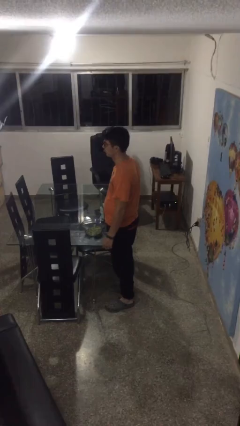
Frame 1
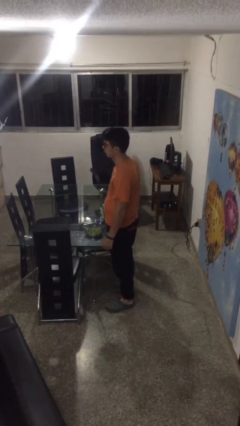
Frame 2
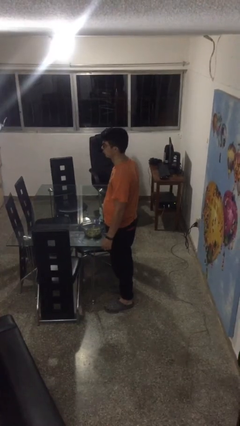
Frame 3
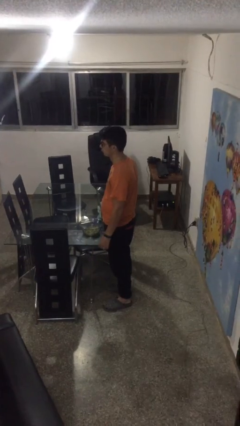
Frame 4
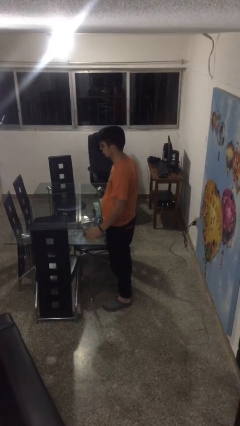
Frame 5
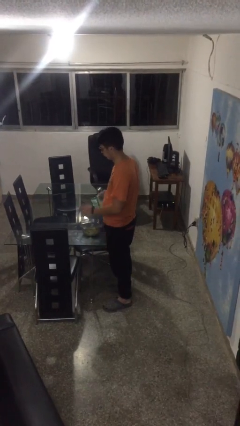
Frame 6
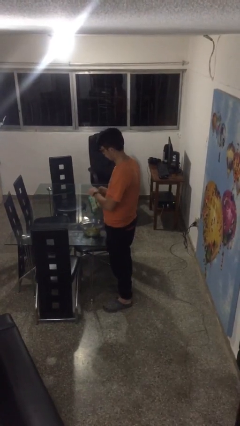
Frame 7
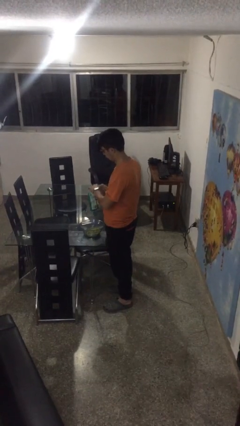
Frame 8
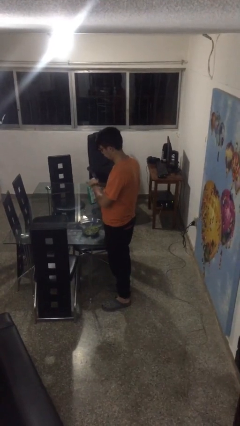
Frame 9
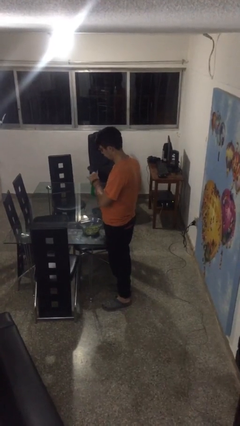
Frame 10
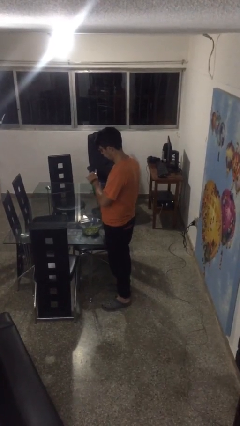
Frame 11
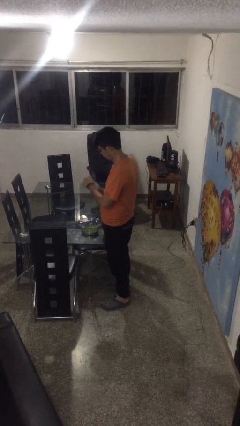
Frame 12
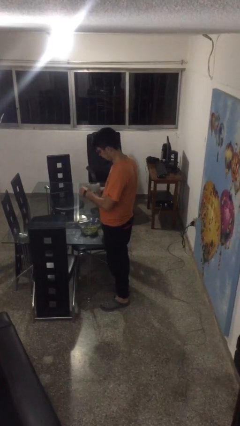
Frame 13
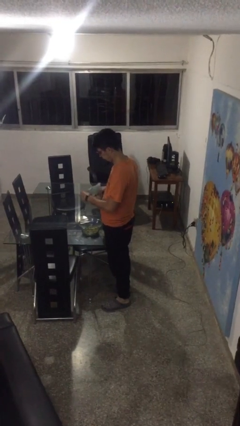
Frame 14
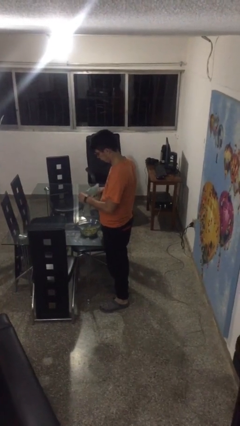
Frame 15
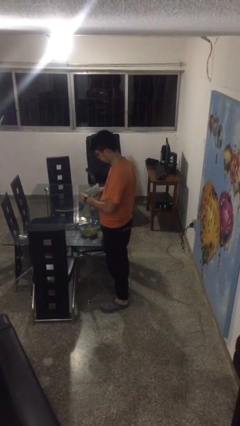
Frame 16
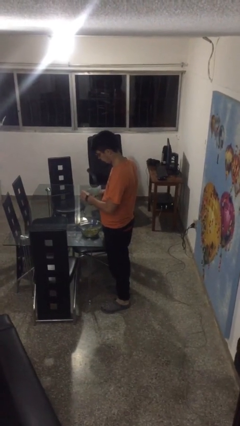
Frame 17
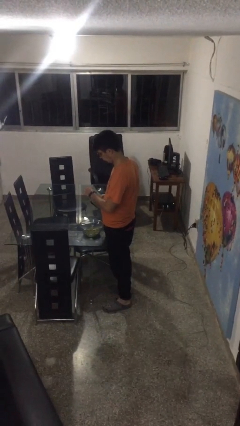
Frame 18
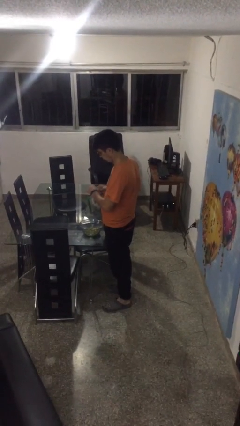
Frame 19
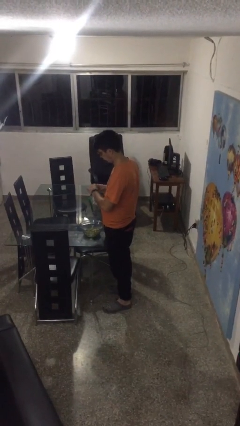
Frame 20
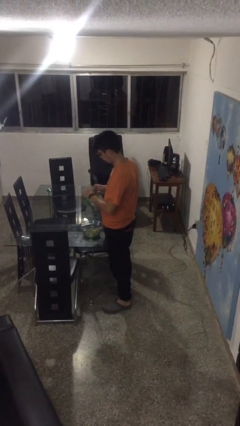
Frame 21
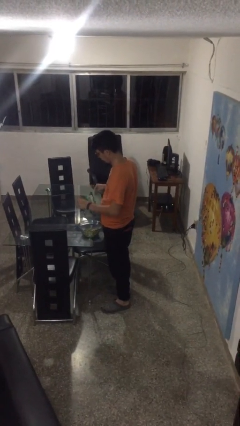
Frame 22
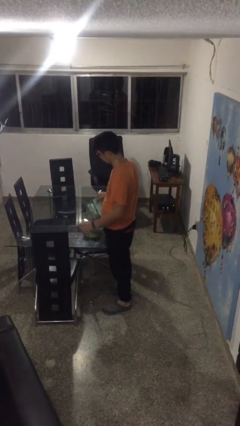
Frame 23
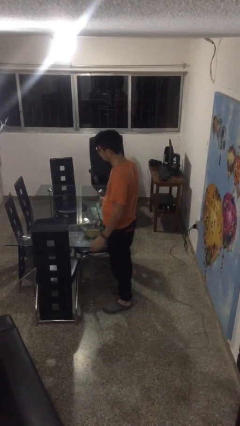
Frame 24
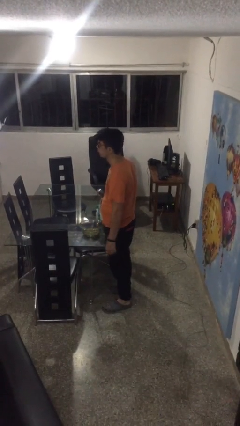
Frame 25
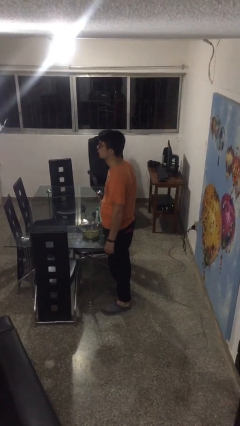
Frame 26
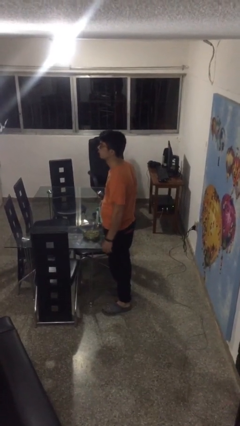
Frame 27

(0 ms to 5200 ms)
person pours into bowl

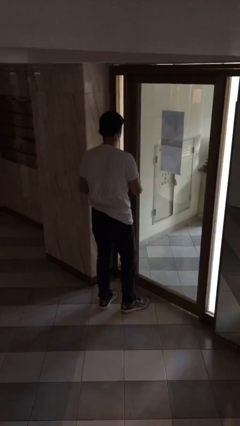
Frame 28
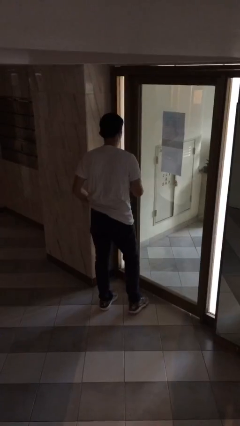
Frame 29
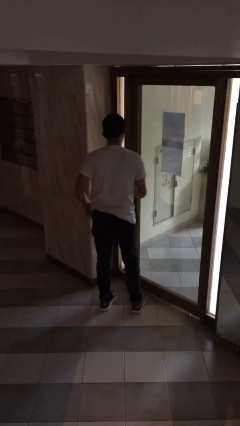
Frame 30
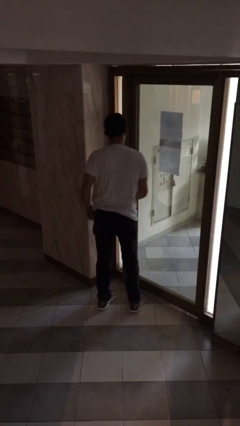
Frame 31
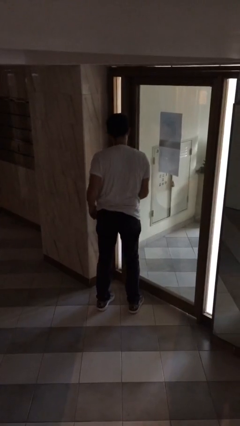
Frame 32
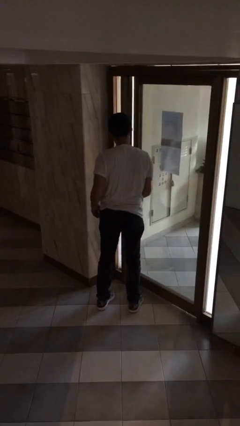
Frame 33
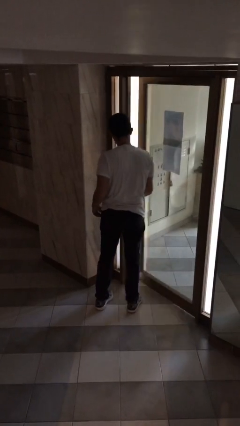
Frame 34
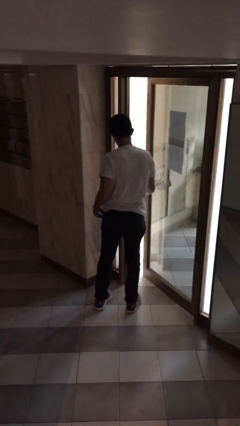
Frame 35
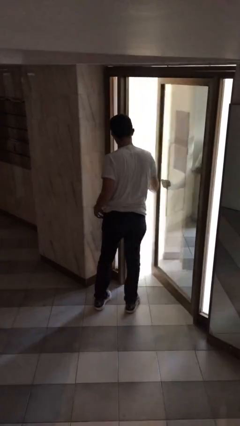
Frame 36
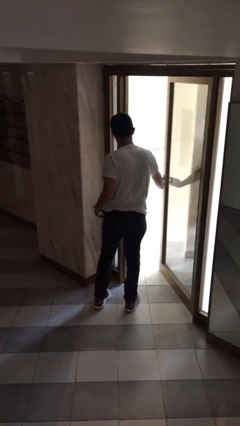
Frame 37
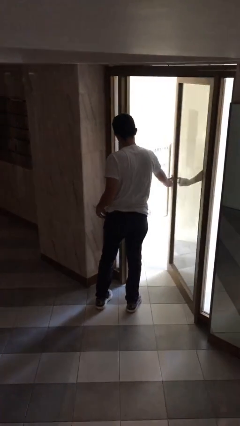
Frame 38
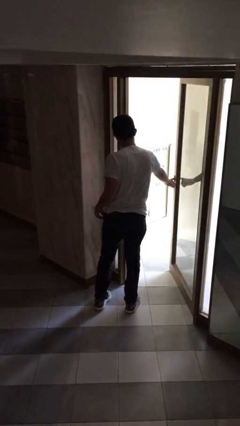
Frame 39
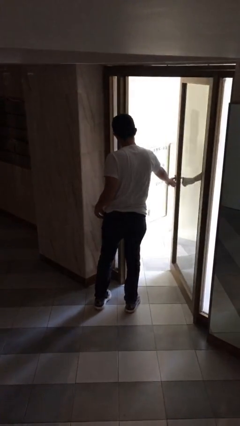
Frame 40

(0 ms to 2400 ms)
person opens facility door

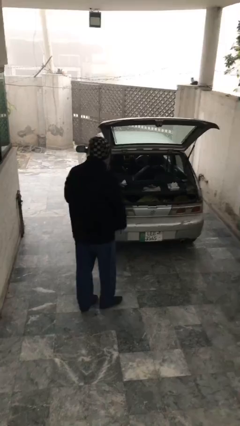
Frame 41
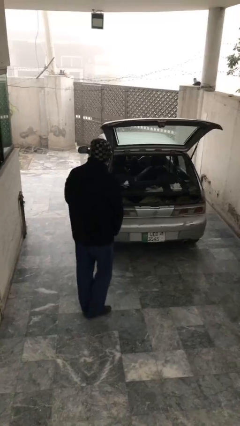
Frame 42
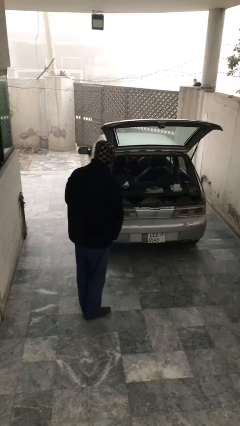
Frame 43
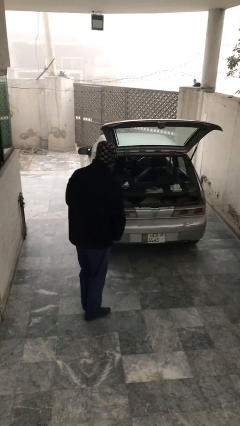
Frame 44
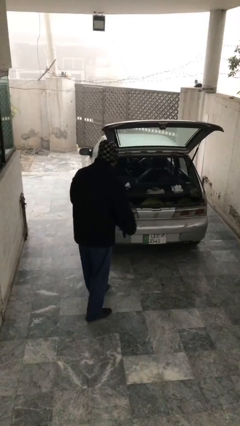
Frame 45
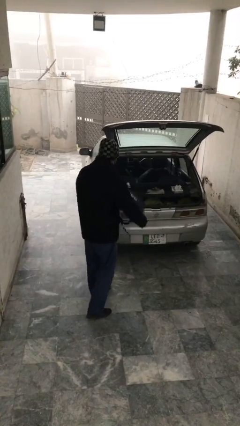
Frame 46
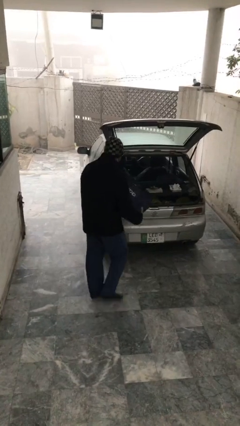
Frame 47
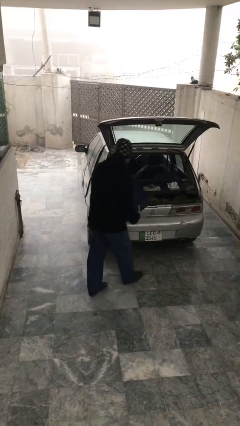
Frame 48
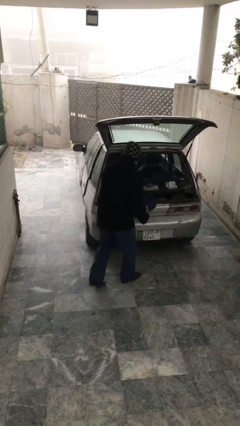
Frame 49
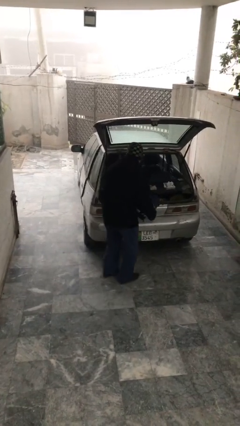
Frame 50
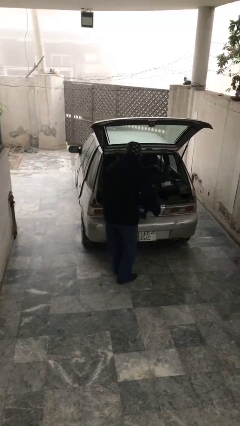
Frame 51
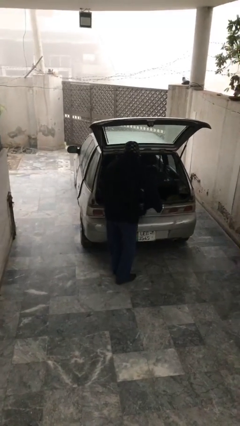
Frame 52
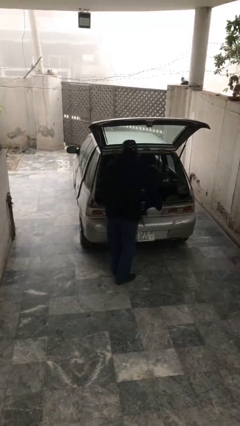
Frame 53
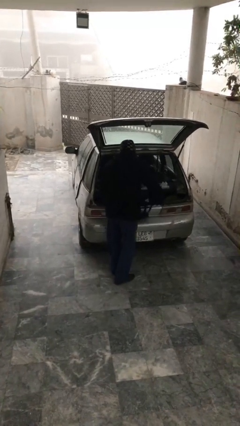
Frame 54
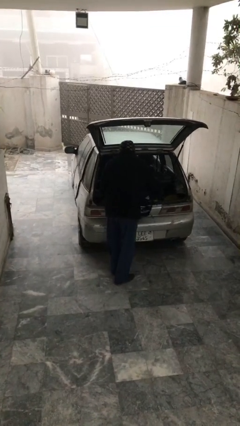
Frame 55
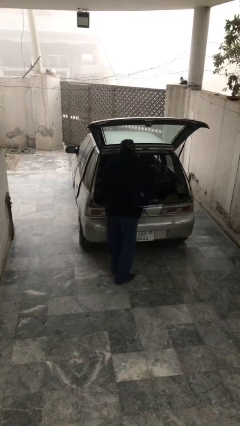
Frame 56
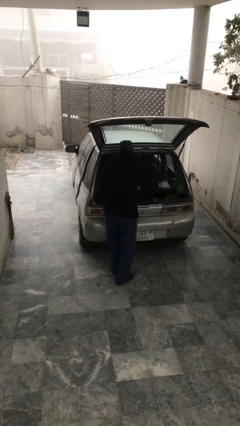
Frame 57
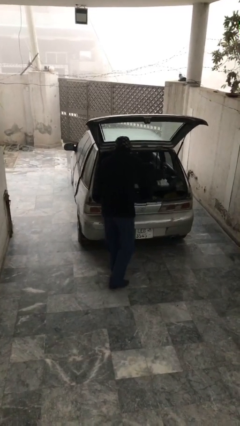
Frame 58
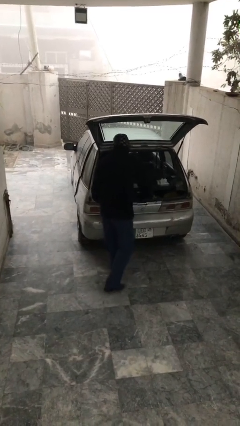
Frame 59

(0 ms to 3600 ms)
person loads car

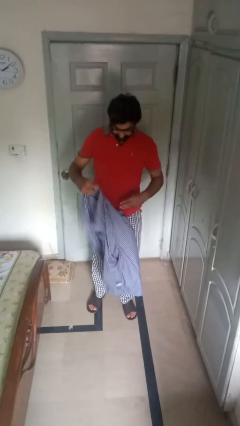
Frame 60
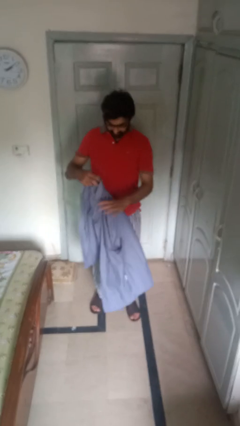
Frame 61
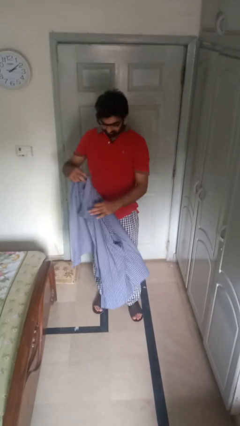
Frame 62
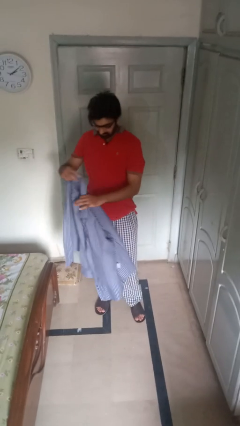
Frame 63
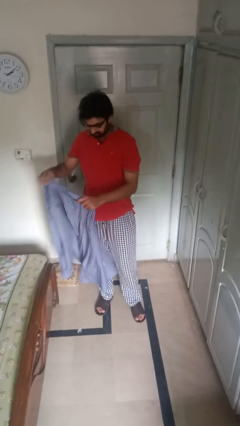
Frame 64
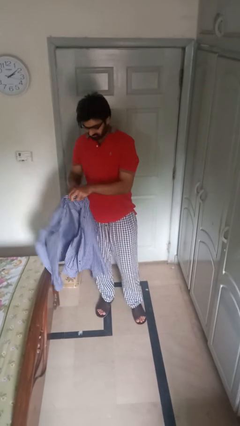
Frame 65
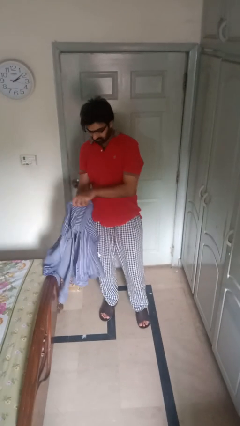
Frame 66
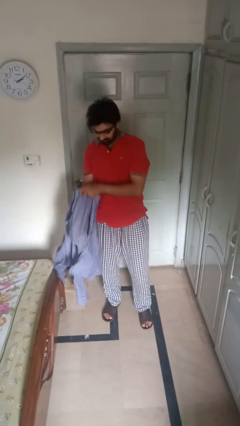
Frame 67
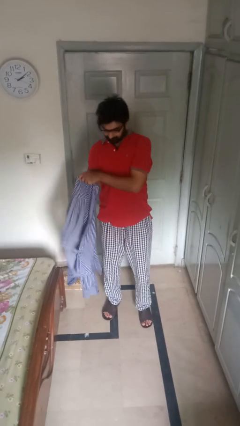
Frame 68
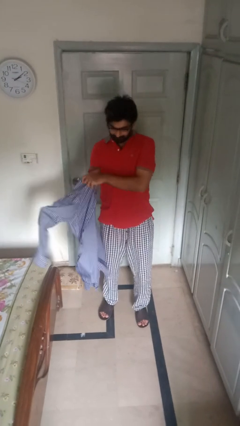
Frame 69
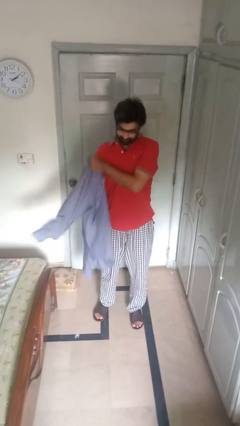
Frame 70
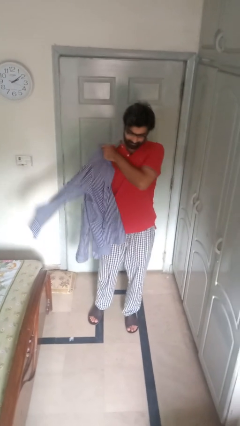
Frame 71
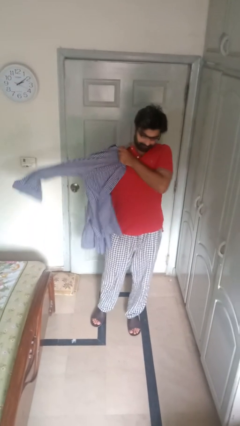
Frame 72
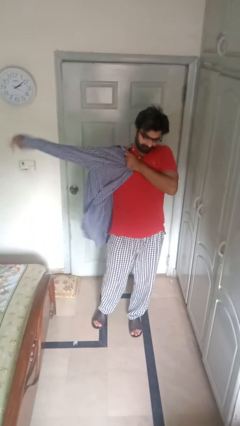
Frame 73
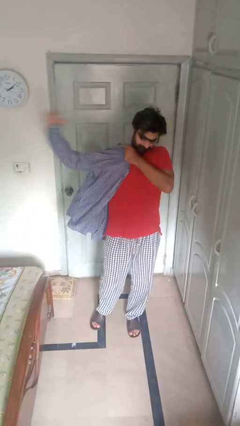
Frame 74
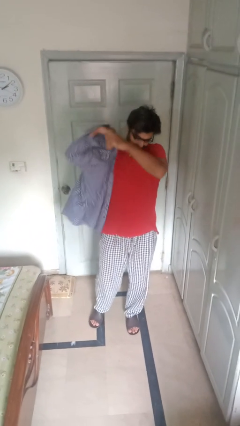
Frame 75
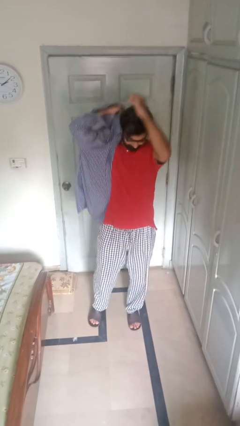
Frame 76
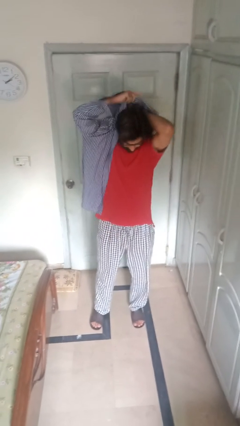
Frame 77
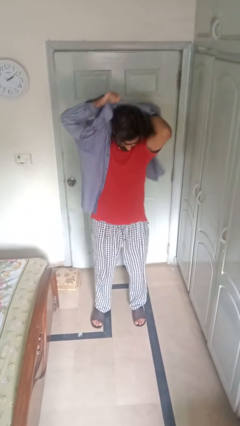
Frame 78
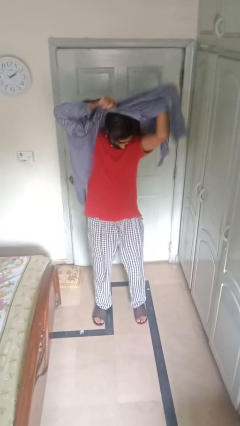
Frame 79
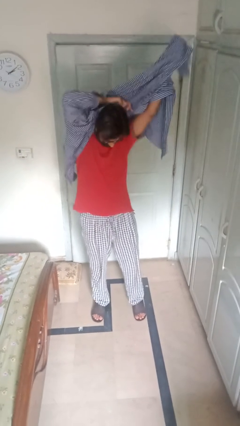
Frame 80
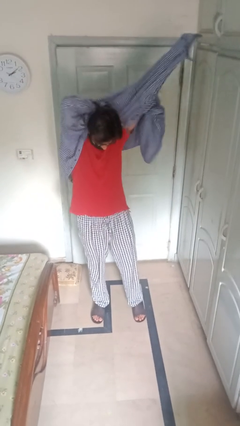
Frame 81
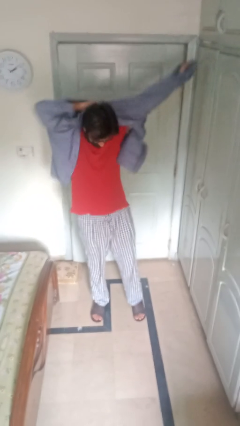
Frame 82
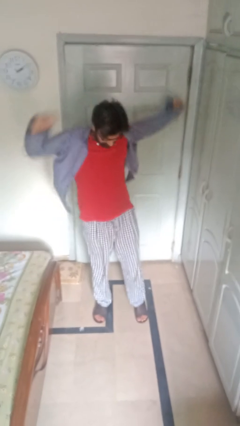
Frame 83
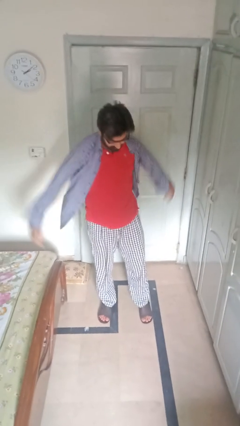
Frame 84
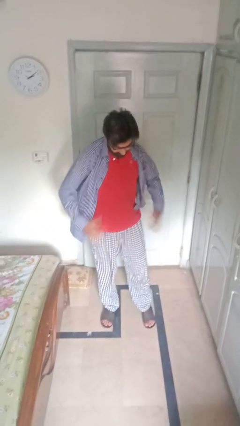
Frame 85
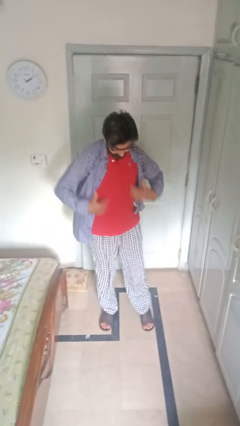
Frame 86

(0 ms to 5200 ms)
person puts on shirt

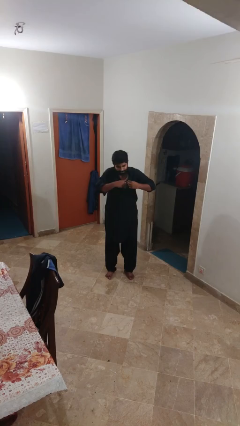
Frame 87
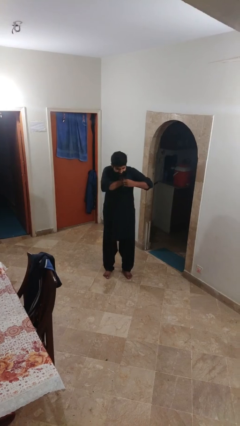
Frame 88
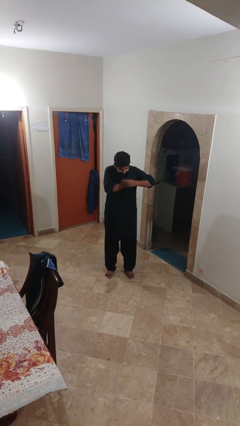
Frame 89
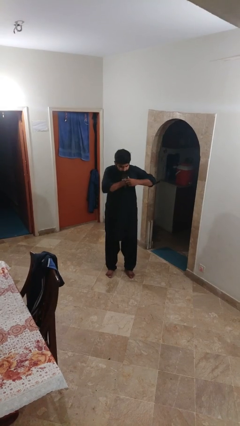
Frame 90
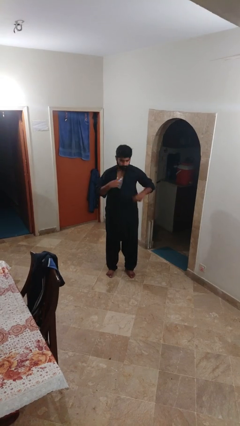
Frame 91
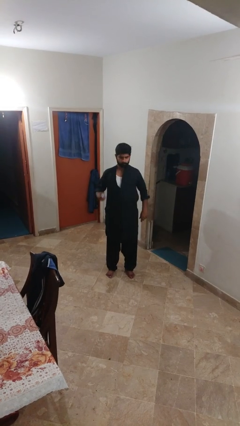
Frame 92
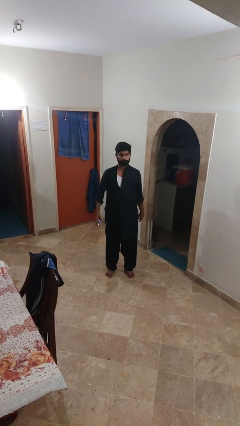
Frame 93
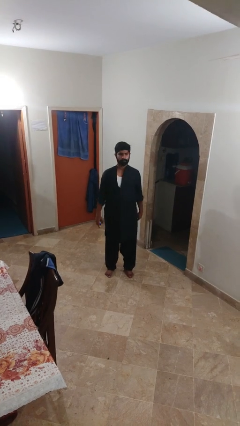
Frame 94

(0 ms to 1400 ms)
person applies deodorant
